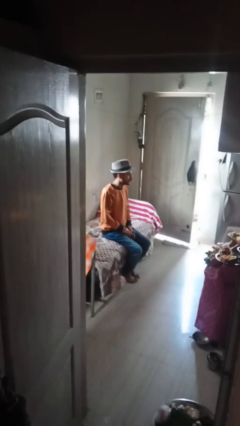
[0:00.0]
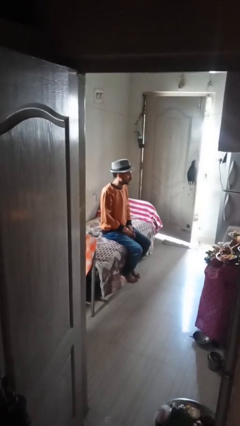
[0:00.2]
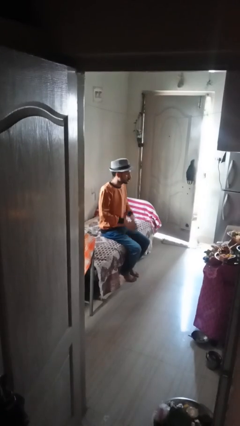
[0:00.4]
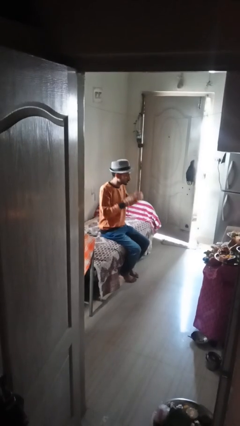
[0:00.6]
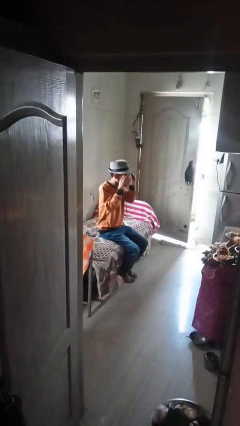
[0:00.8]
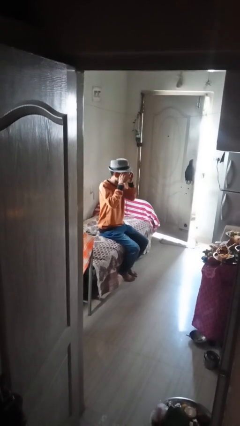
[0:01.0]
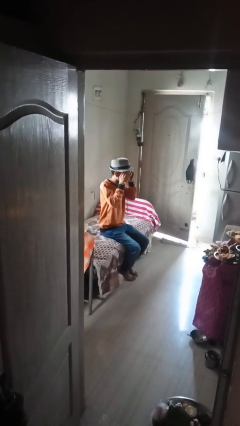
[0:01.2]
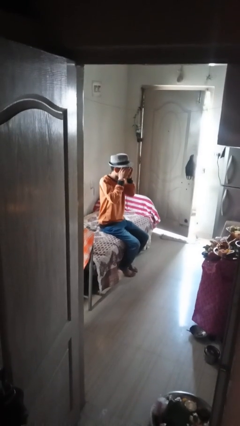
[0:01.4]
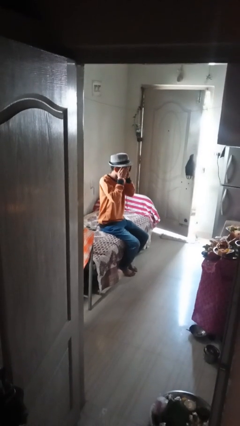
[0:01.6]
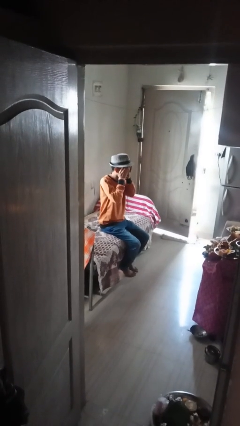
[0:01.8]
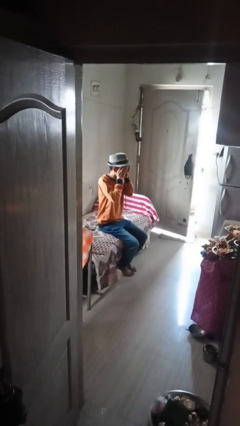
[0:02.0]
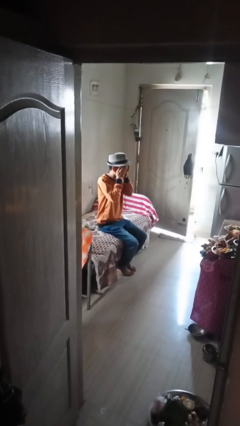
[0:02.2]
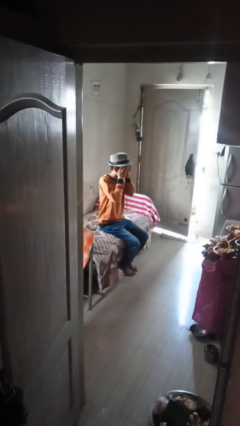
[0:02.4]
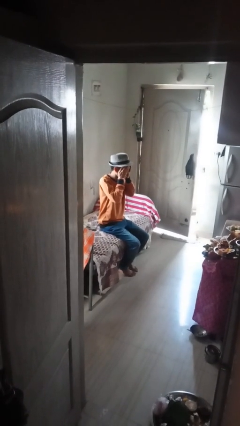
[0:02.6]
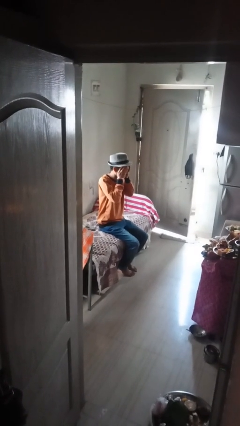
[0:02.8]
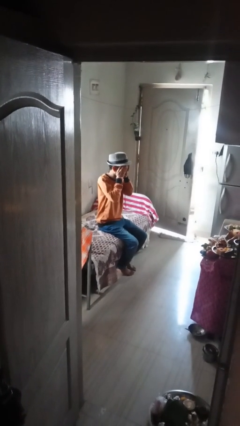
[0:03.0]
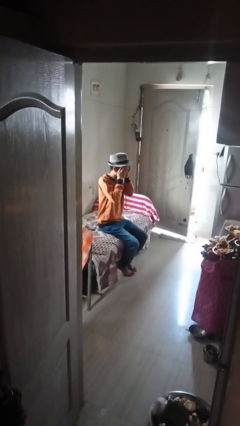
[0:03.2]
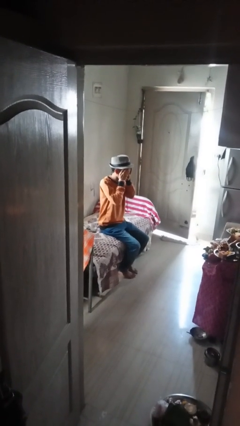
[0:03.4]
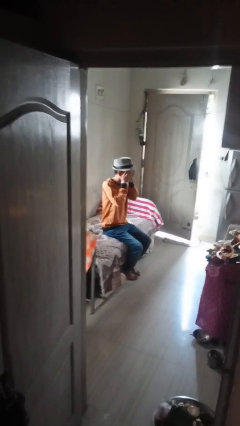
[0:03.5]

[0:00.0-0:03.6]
person covers face with hands

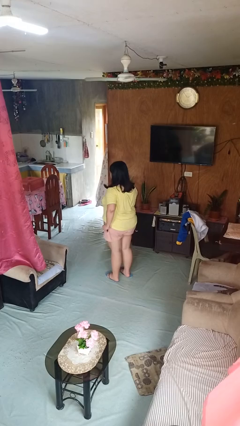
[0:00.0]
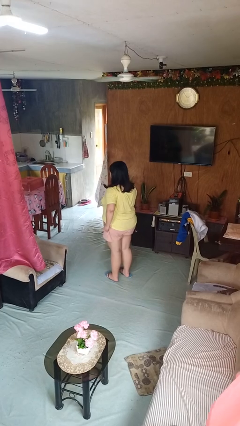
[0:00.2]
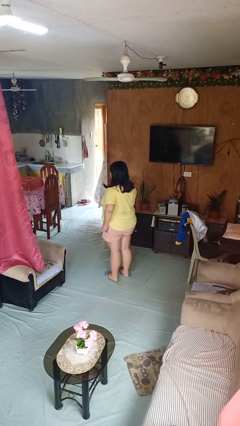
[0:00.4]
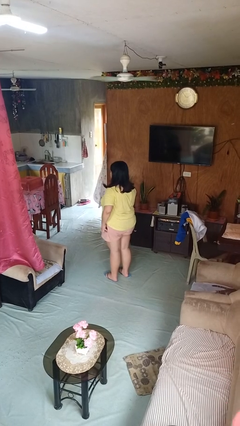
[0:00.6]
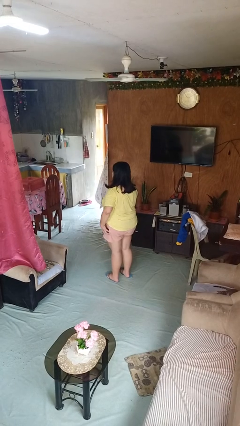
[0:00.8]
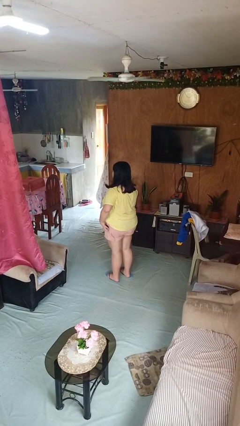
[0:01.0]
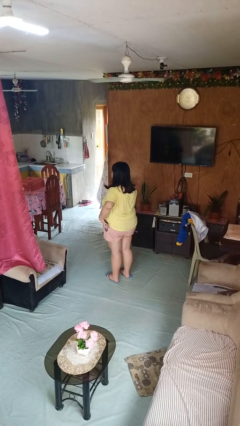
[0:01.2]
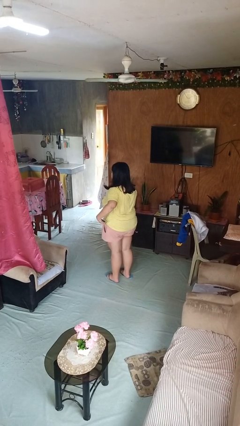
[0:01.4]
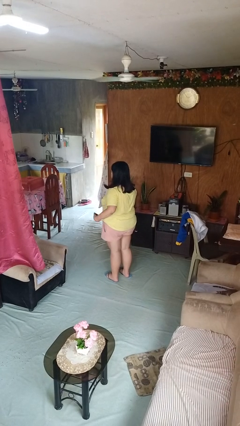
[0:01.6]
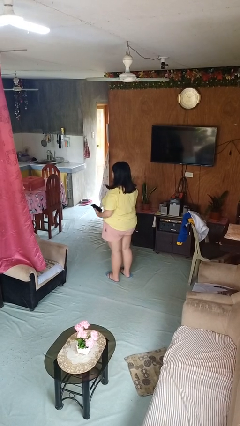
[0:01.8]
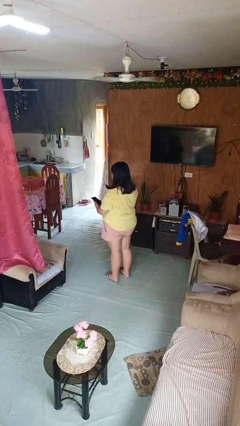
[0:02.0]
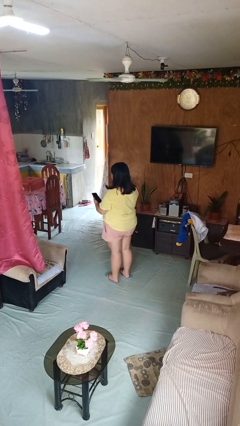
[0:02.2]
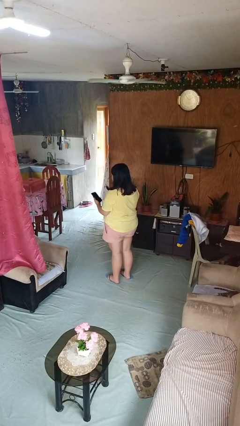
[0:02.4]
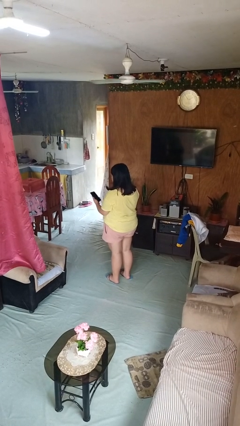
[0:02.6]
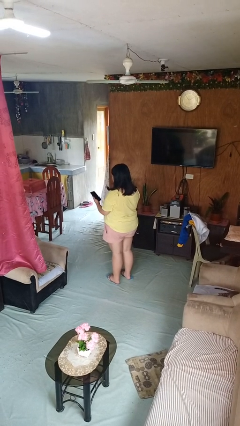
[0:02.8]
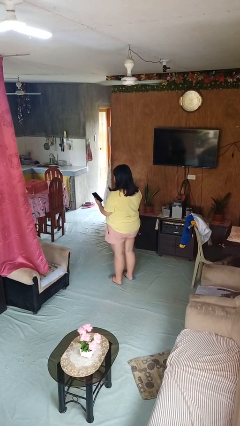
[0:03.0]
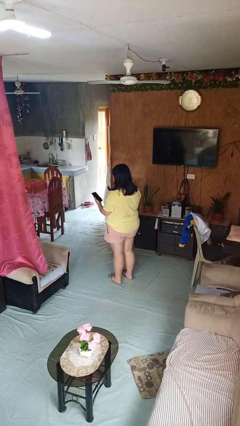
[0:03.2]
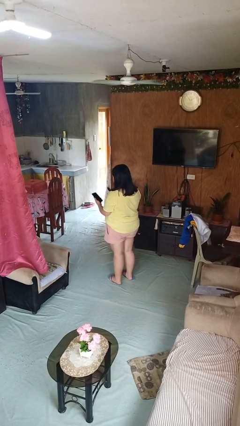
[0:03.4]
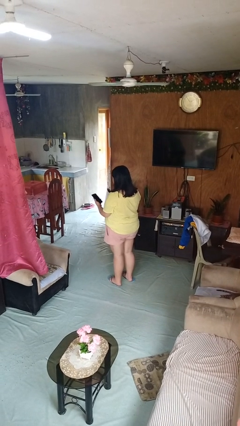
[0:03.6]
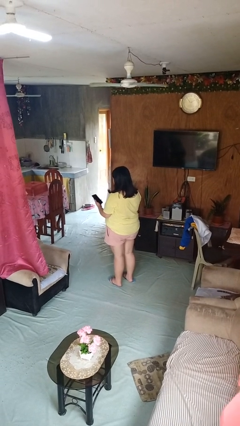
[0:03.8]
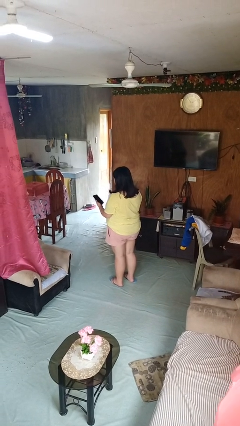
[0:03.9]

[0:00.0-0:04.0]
person takes phone from pocket

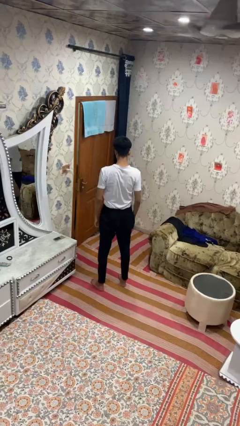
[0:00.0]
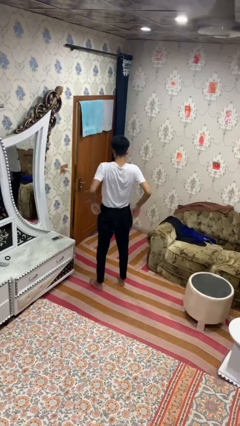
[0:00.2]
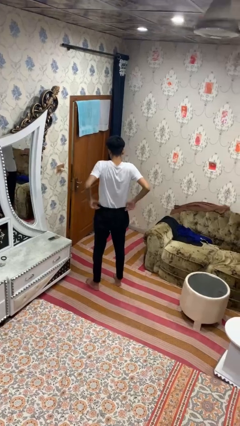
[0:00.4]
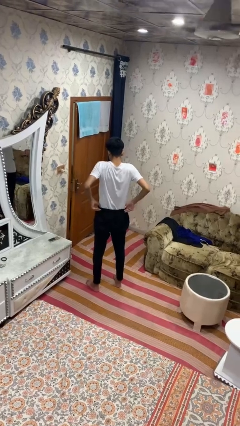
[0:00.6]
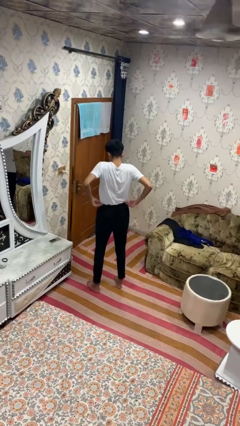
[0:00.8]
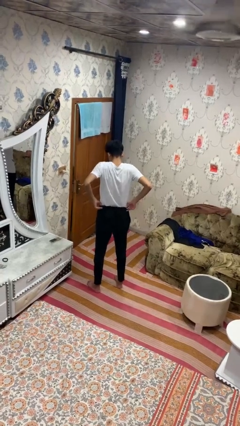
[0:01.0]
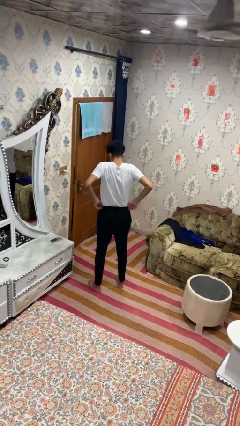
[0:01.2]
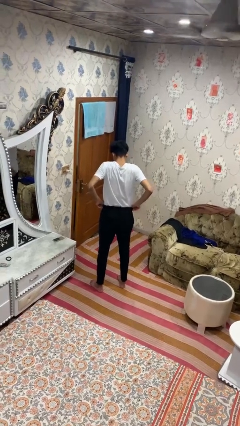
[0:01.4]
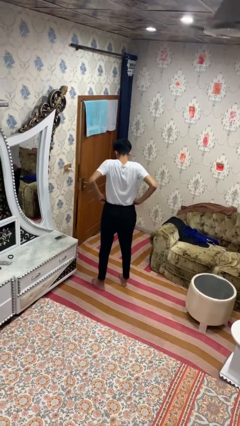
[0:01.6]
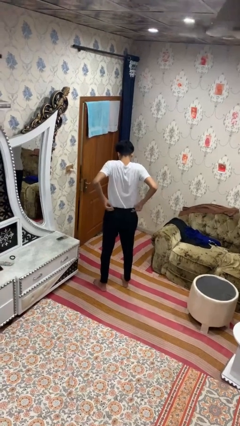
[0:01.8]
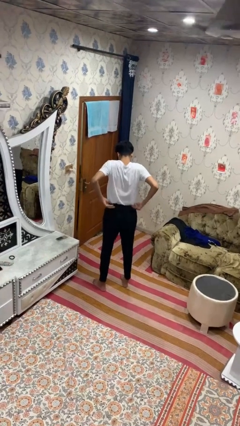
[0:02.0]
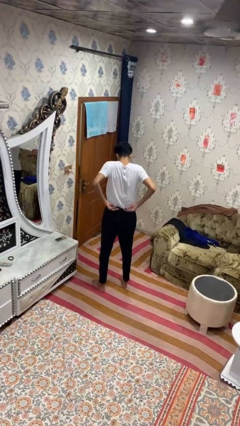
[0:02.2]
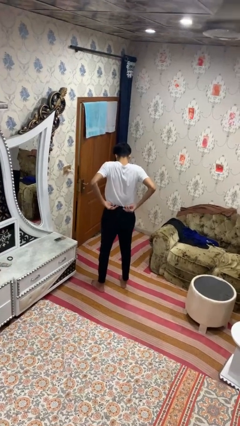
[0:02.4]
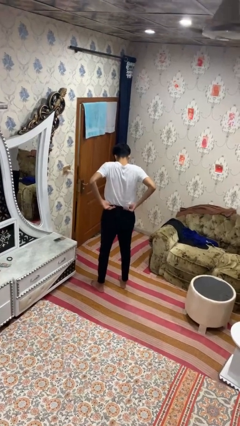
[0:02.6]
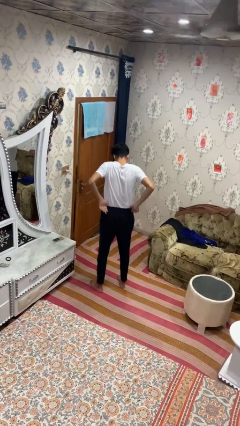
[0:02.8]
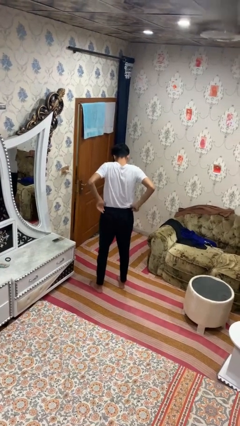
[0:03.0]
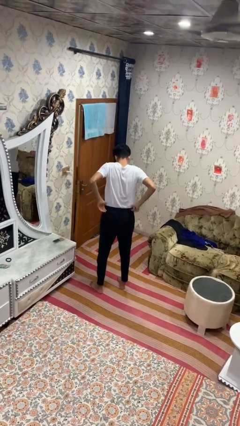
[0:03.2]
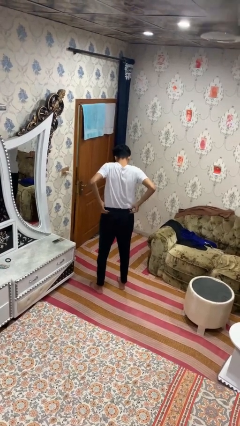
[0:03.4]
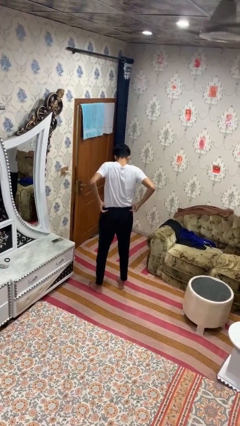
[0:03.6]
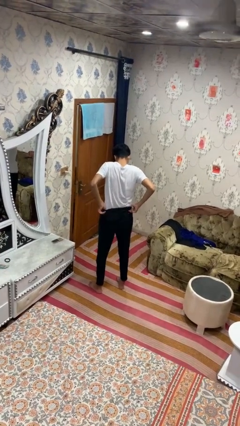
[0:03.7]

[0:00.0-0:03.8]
person hikes up pants

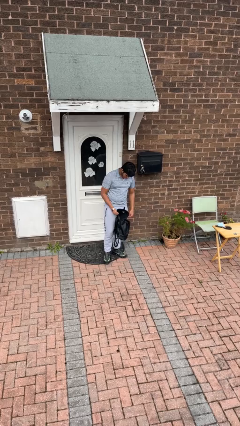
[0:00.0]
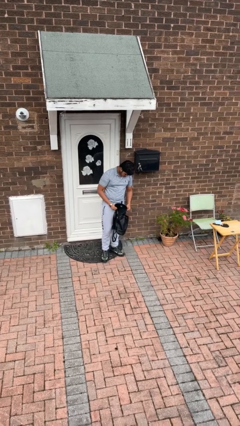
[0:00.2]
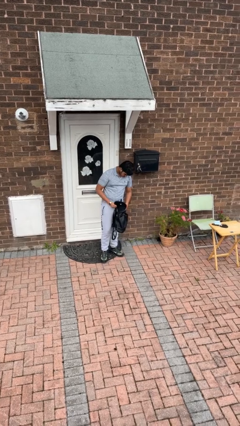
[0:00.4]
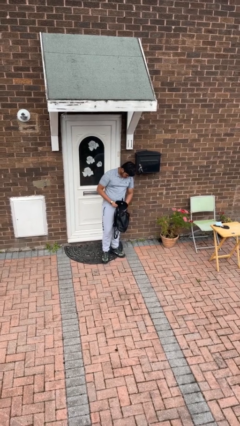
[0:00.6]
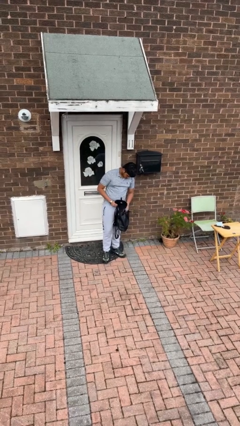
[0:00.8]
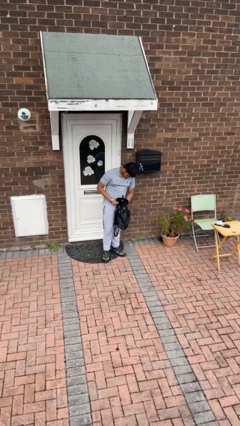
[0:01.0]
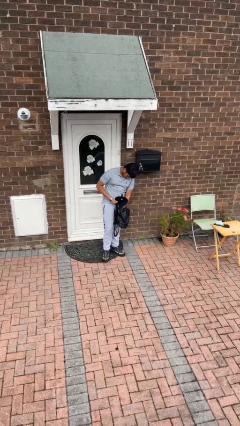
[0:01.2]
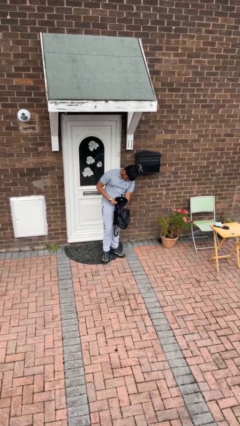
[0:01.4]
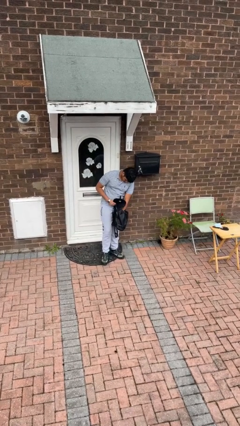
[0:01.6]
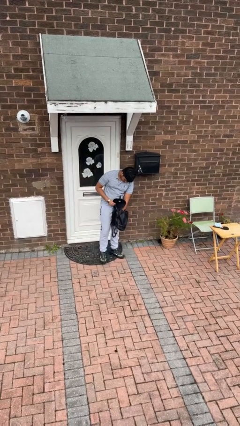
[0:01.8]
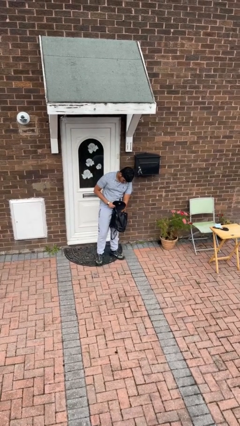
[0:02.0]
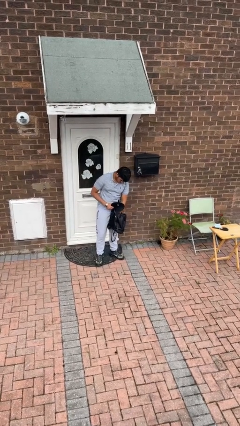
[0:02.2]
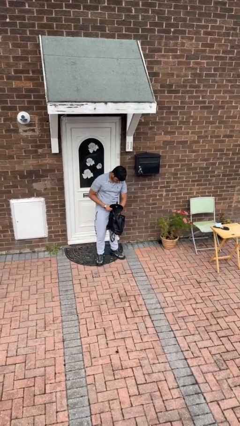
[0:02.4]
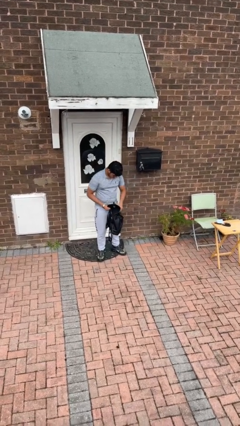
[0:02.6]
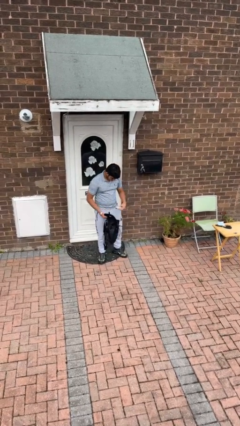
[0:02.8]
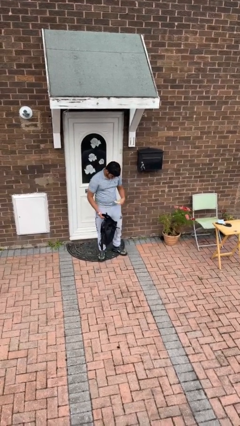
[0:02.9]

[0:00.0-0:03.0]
person searches in backpack

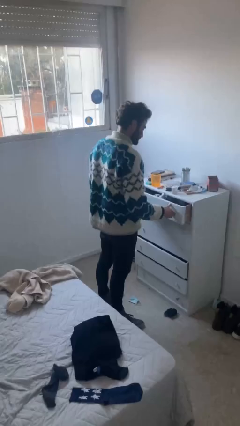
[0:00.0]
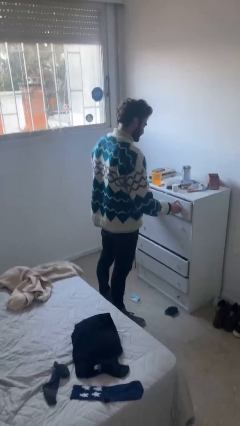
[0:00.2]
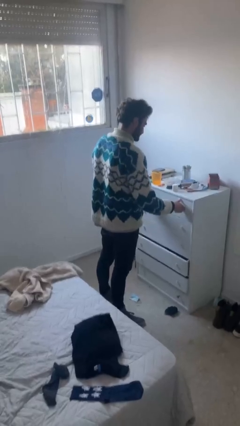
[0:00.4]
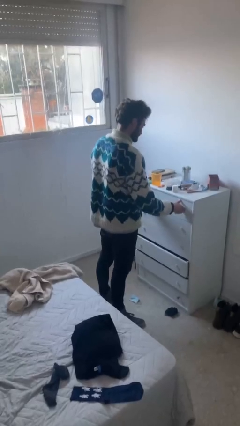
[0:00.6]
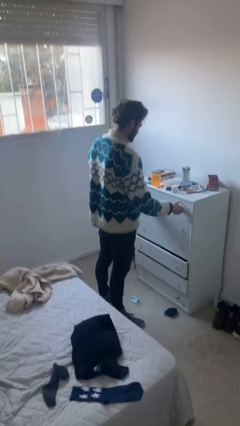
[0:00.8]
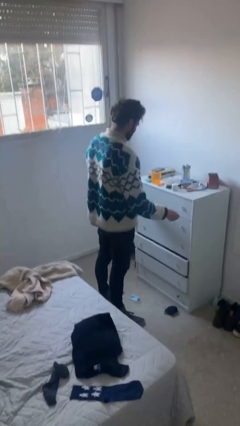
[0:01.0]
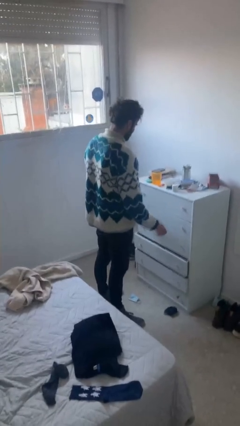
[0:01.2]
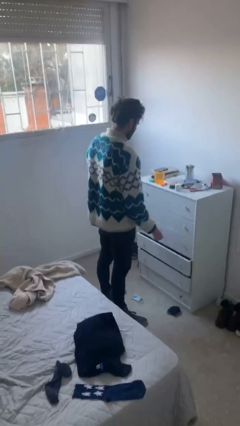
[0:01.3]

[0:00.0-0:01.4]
person closes dresser drawer

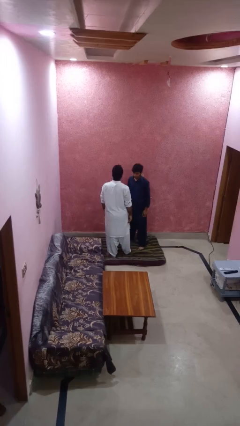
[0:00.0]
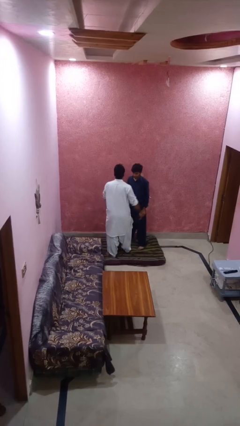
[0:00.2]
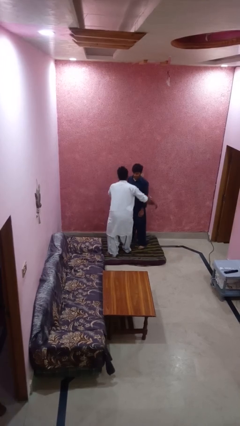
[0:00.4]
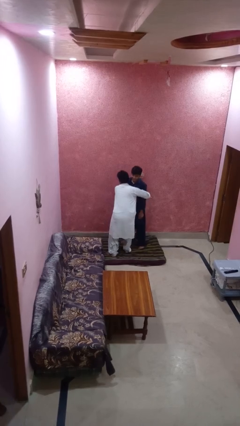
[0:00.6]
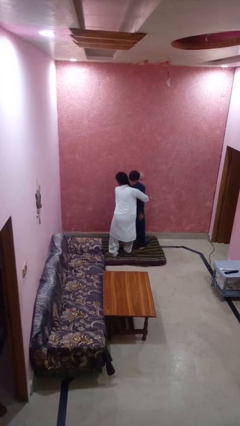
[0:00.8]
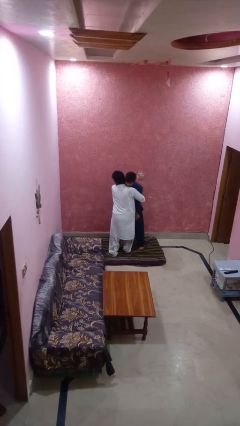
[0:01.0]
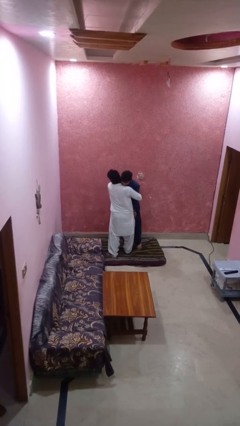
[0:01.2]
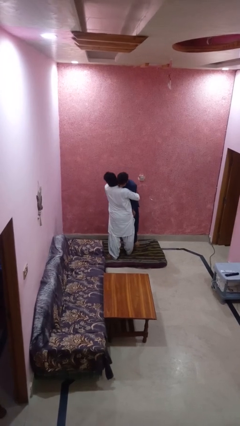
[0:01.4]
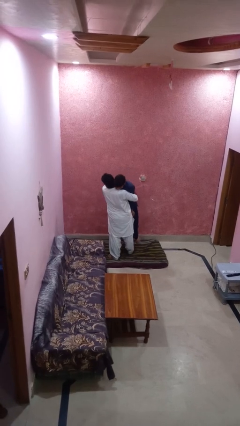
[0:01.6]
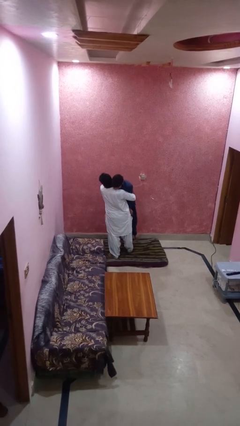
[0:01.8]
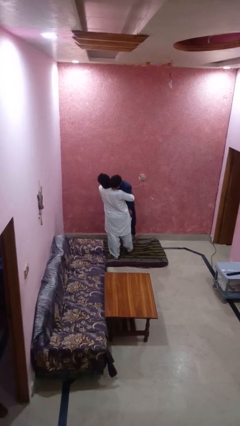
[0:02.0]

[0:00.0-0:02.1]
person picks up person
